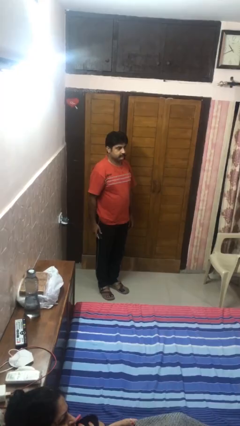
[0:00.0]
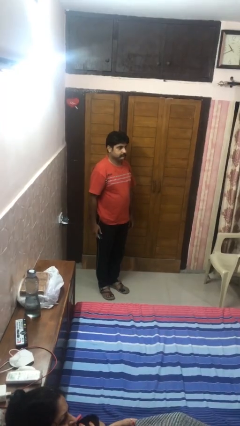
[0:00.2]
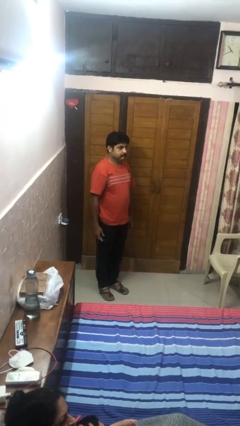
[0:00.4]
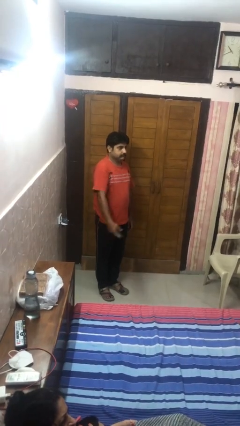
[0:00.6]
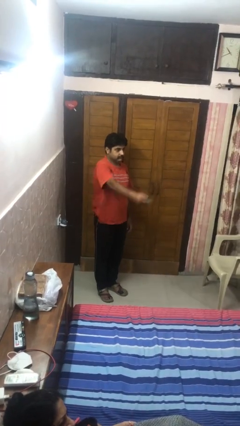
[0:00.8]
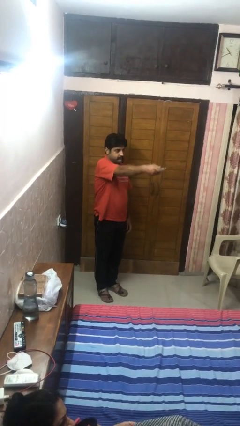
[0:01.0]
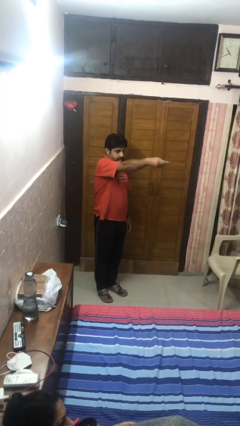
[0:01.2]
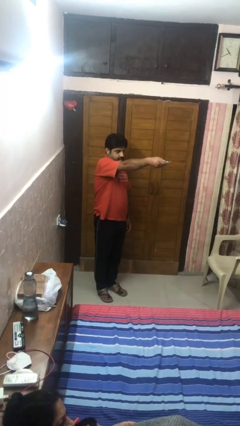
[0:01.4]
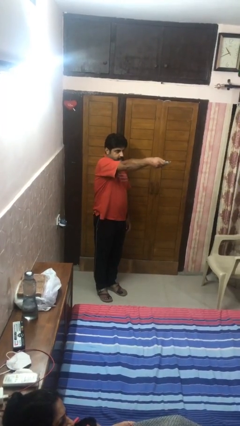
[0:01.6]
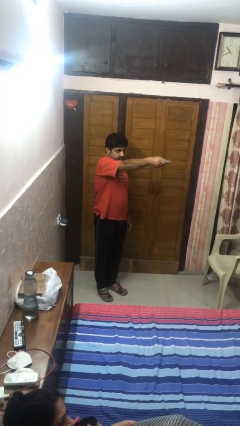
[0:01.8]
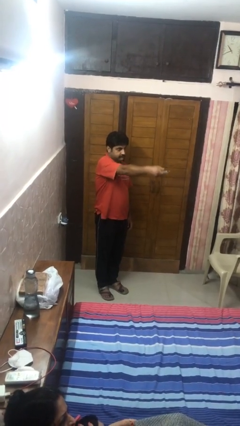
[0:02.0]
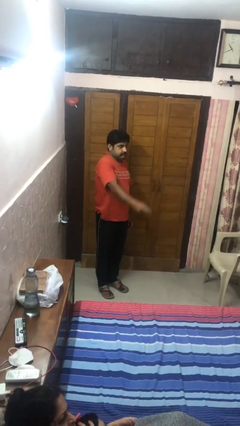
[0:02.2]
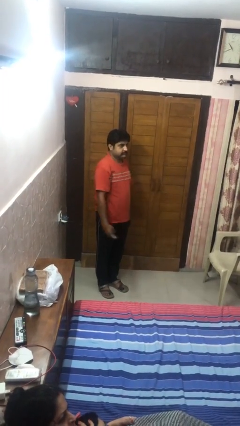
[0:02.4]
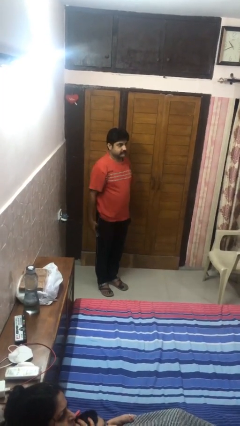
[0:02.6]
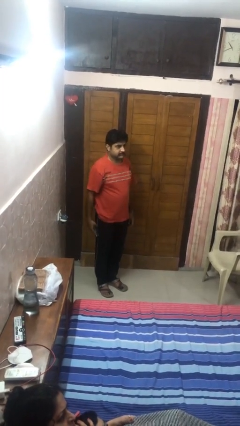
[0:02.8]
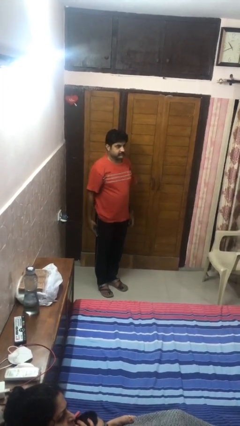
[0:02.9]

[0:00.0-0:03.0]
person uses television remote

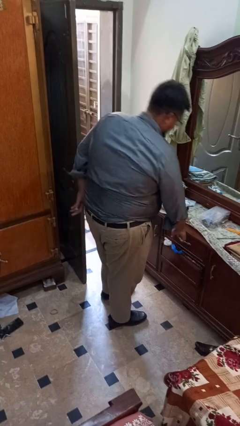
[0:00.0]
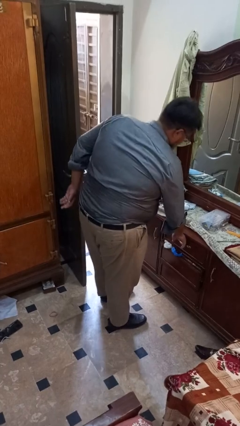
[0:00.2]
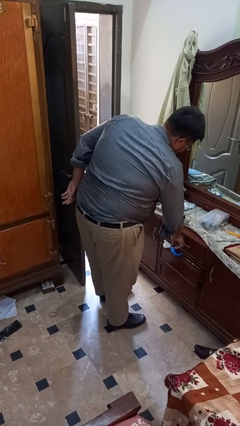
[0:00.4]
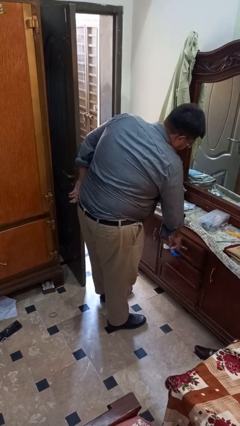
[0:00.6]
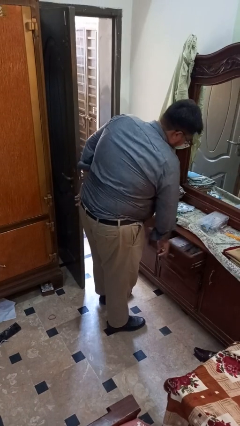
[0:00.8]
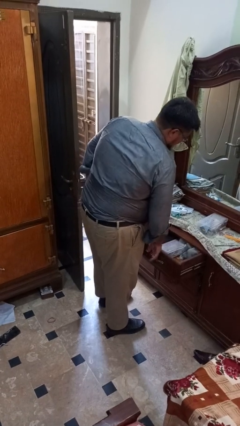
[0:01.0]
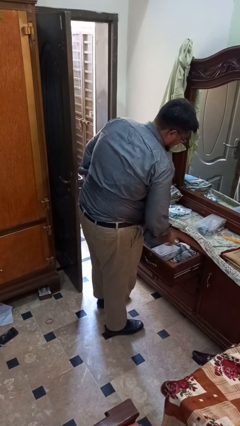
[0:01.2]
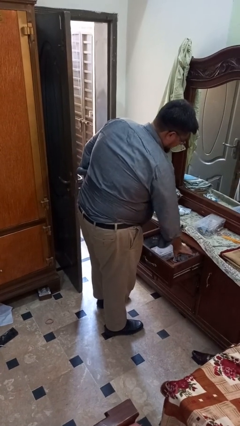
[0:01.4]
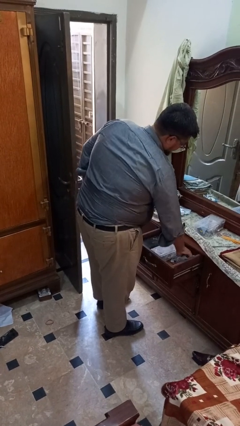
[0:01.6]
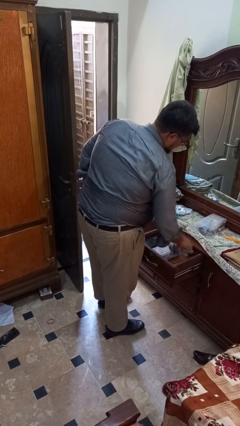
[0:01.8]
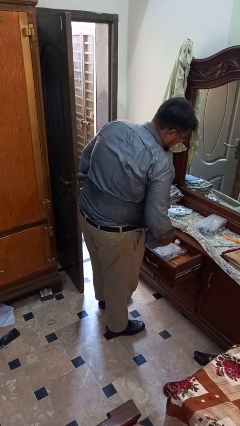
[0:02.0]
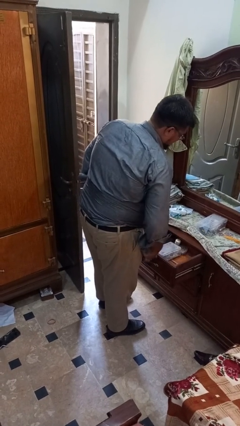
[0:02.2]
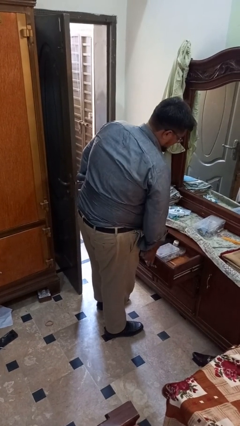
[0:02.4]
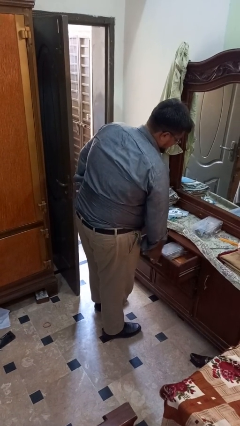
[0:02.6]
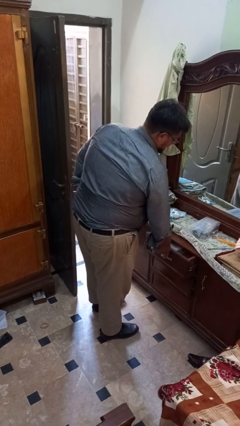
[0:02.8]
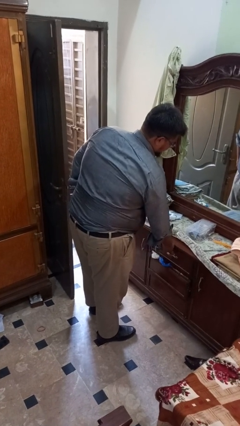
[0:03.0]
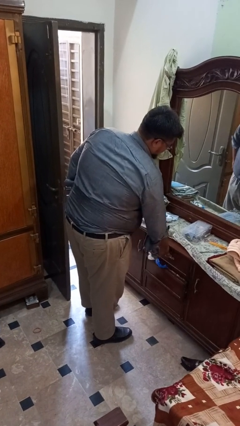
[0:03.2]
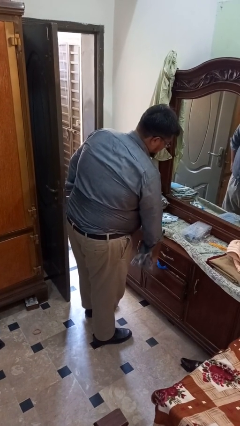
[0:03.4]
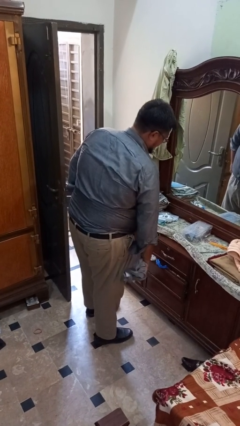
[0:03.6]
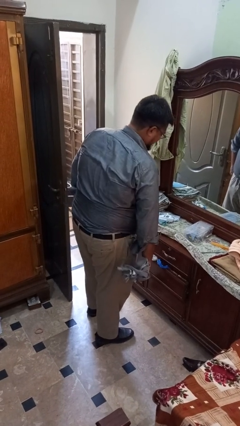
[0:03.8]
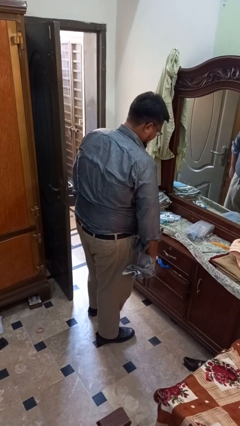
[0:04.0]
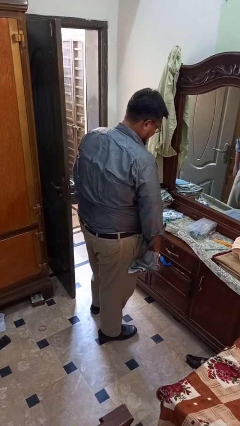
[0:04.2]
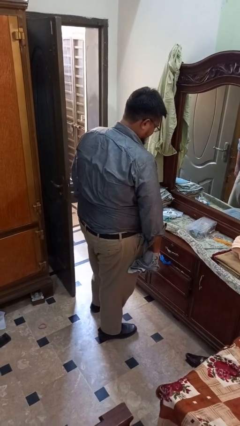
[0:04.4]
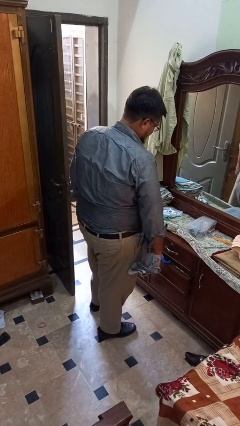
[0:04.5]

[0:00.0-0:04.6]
person takes clothes from dresser

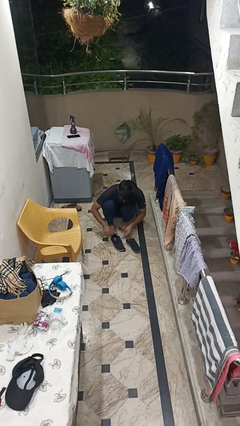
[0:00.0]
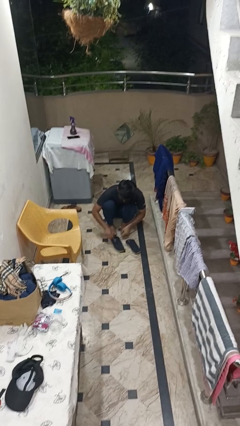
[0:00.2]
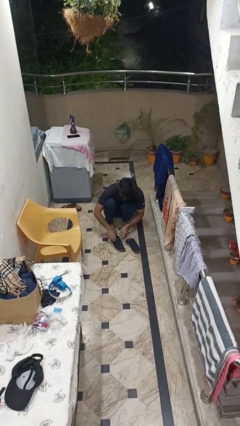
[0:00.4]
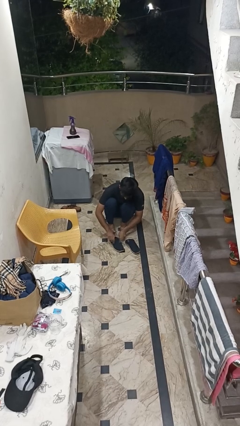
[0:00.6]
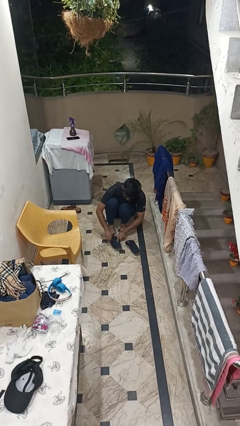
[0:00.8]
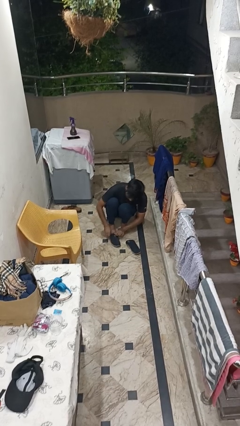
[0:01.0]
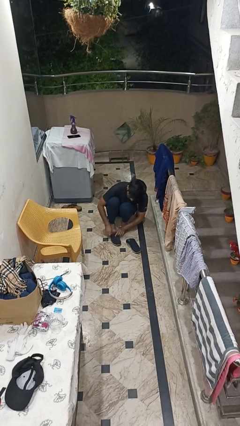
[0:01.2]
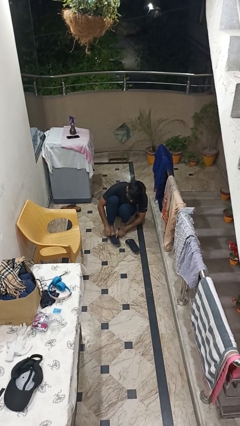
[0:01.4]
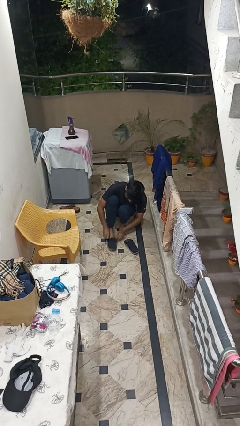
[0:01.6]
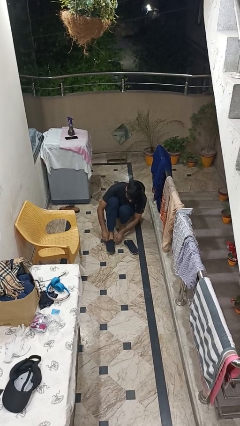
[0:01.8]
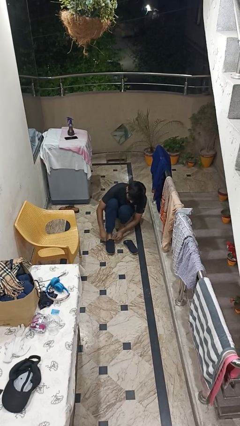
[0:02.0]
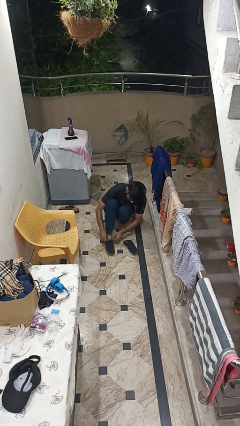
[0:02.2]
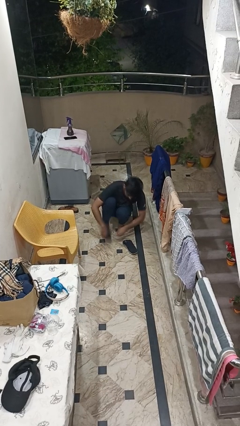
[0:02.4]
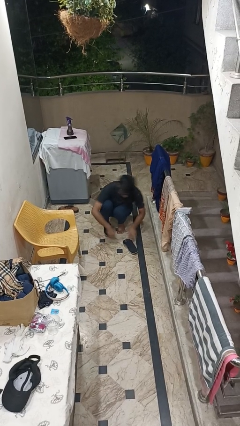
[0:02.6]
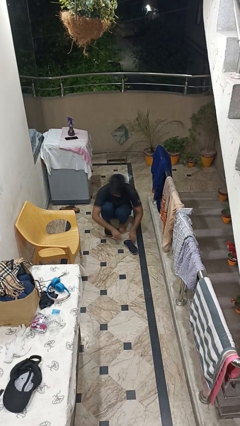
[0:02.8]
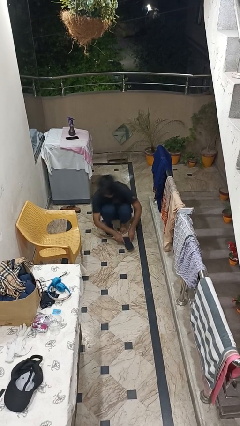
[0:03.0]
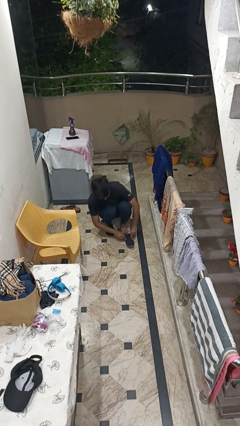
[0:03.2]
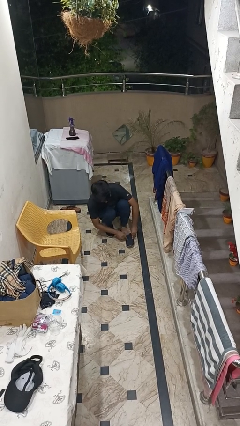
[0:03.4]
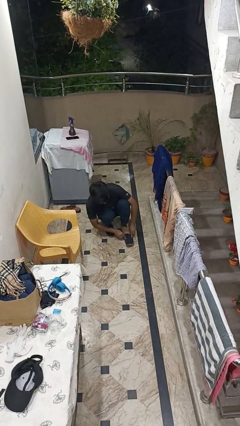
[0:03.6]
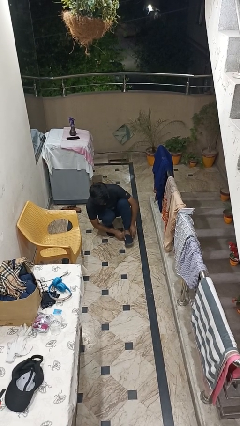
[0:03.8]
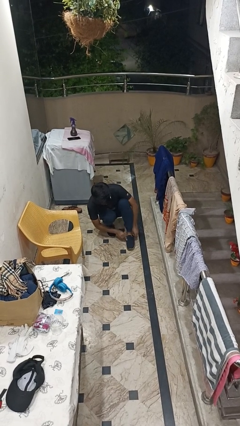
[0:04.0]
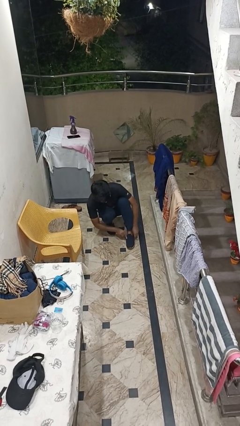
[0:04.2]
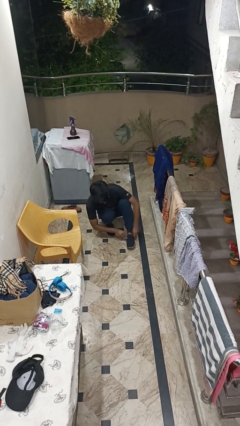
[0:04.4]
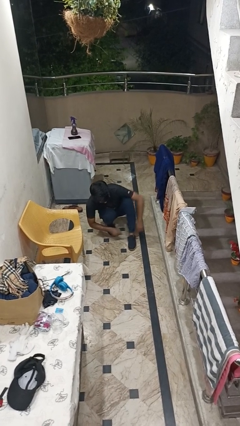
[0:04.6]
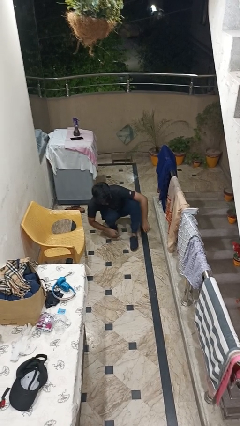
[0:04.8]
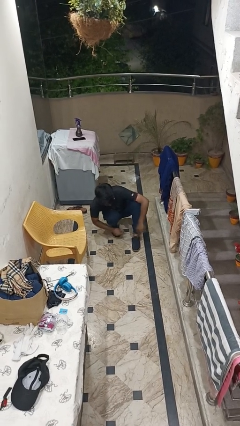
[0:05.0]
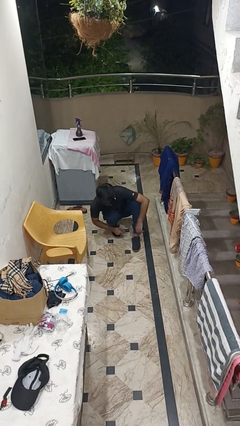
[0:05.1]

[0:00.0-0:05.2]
person puts on shoes

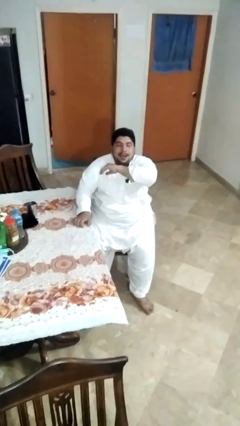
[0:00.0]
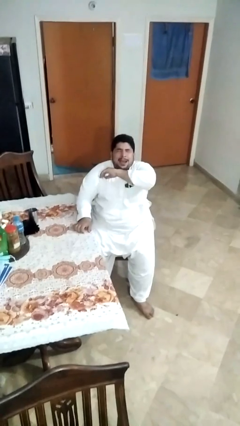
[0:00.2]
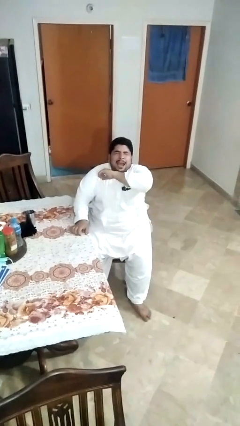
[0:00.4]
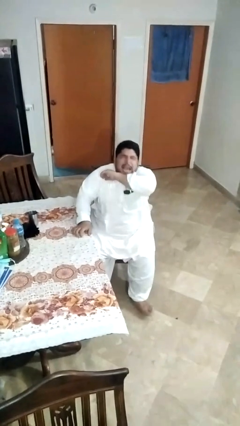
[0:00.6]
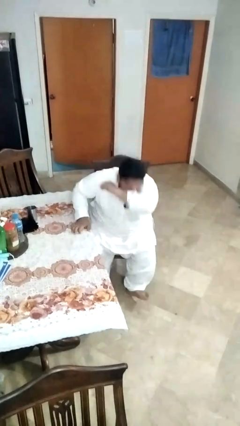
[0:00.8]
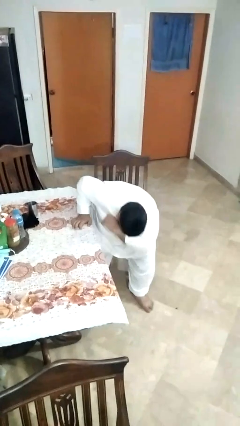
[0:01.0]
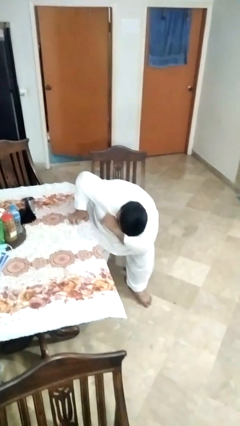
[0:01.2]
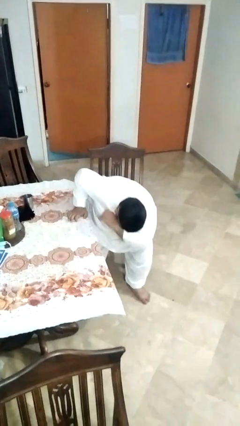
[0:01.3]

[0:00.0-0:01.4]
person sneezes into arm

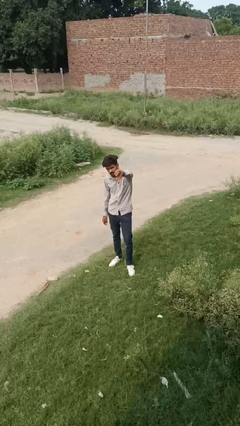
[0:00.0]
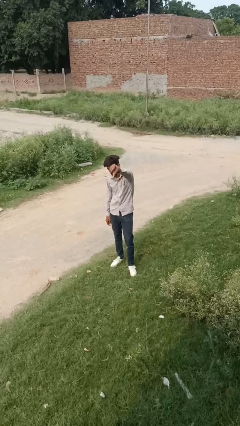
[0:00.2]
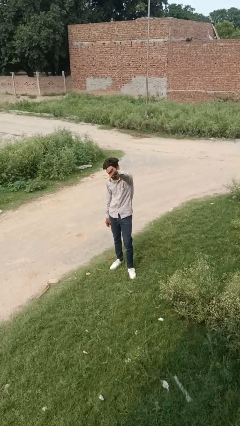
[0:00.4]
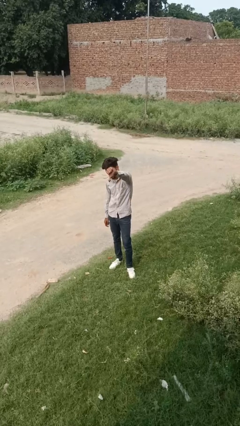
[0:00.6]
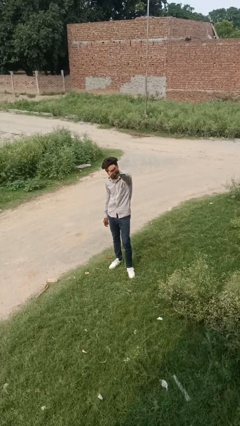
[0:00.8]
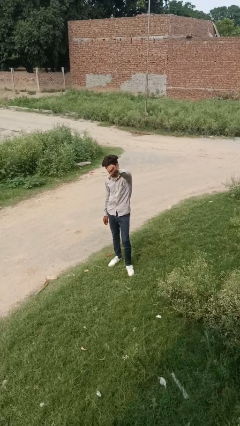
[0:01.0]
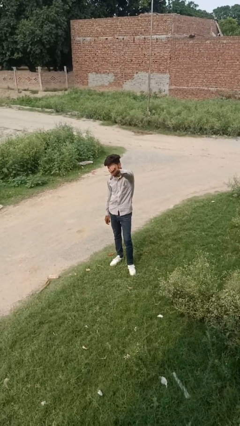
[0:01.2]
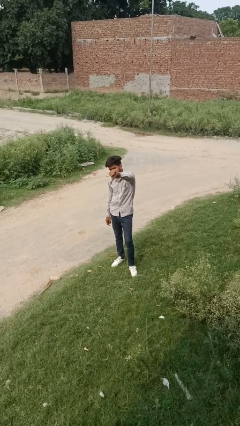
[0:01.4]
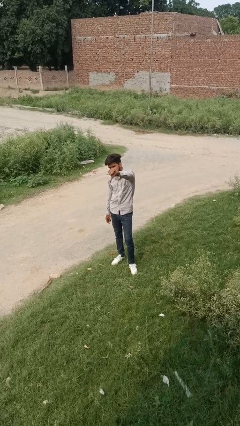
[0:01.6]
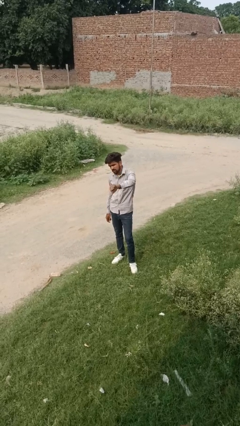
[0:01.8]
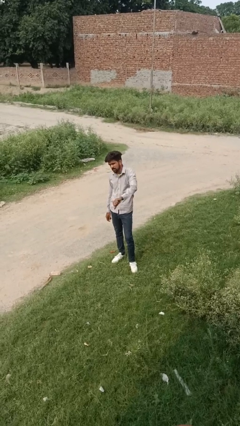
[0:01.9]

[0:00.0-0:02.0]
person gestures thumbs down

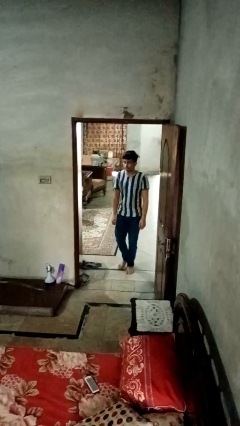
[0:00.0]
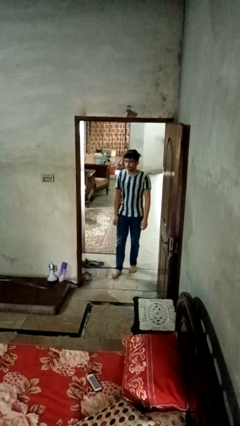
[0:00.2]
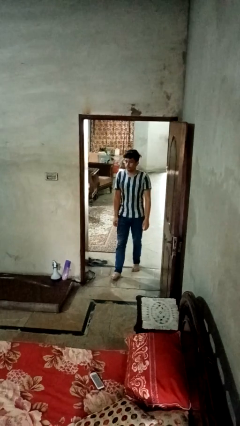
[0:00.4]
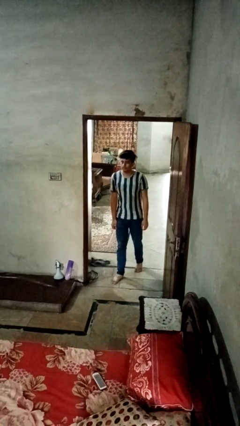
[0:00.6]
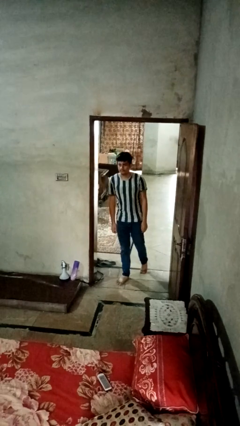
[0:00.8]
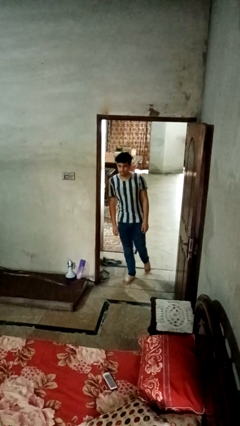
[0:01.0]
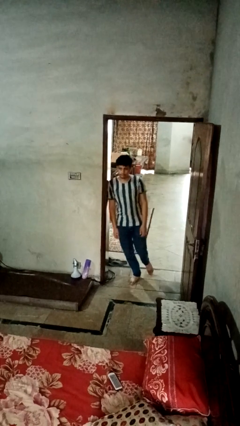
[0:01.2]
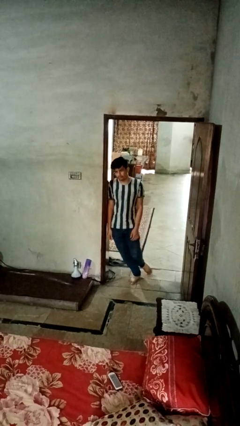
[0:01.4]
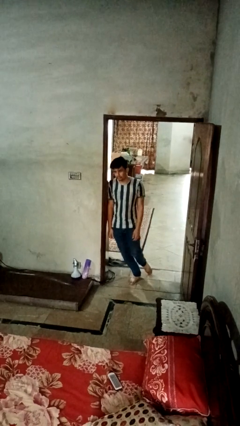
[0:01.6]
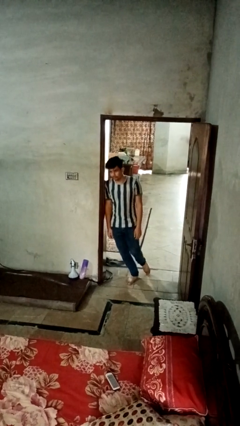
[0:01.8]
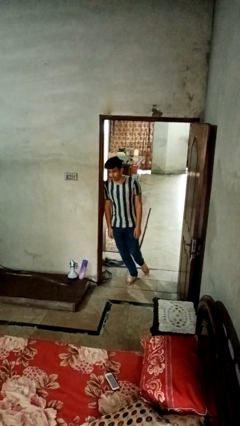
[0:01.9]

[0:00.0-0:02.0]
person bumps into wall
